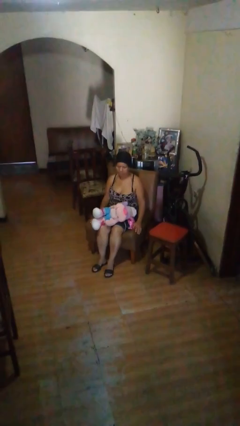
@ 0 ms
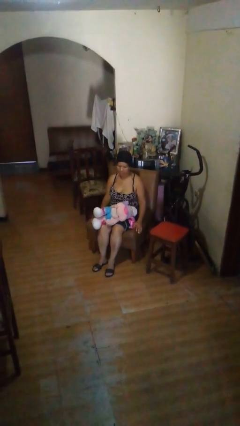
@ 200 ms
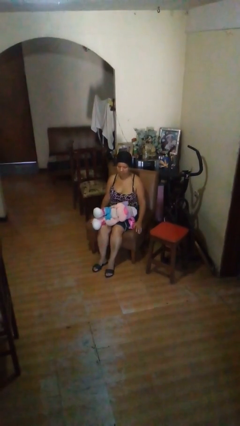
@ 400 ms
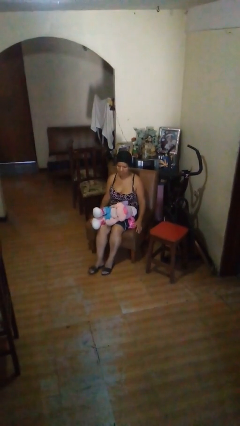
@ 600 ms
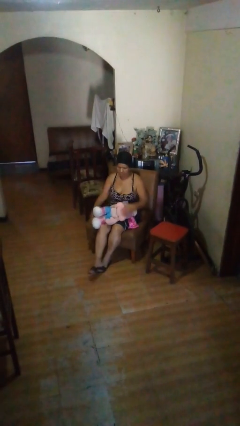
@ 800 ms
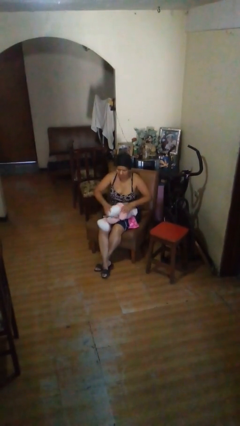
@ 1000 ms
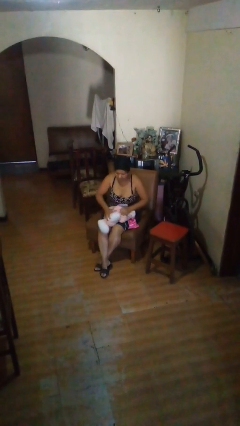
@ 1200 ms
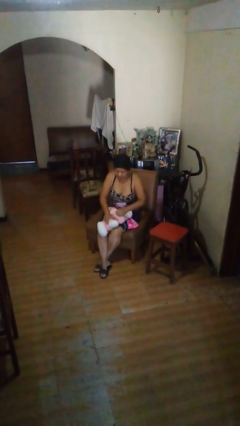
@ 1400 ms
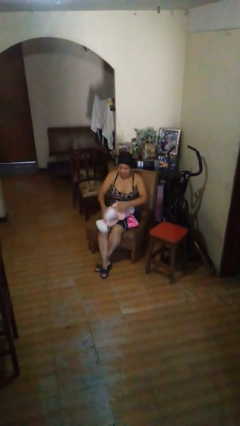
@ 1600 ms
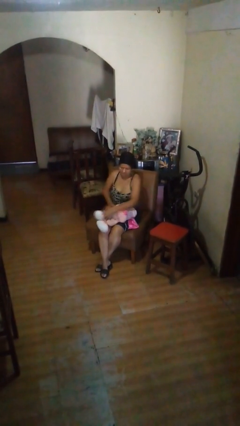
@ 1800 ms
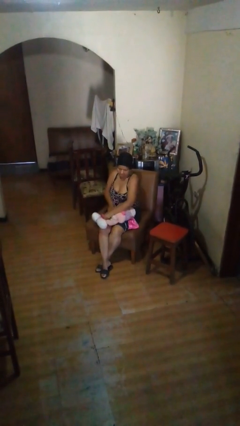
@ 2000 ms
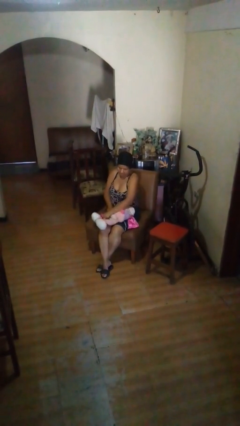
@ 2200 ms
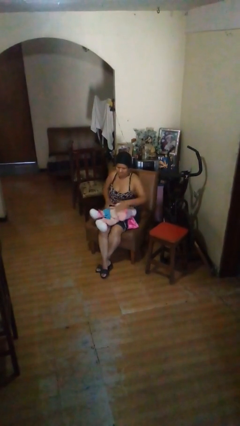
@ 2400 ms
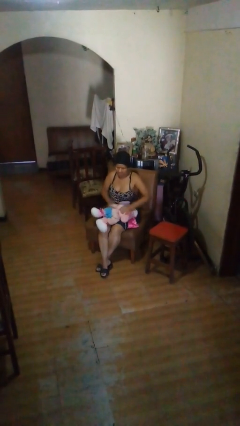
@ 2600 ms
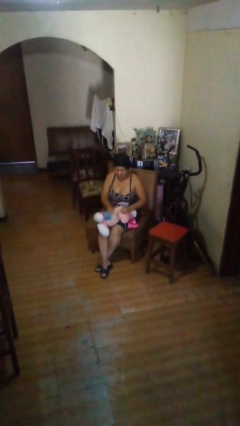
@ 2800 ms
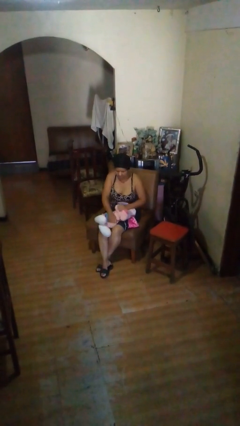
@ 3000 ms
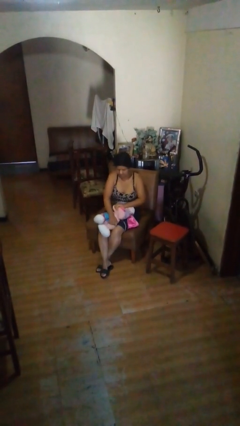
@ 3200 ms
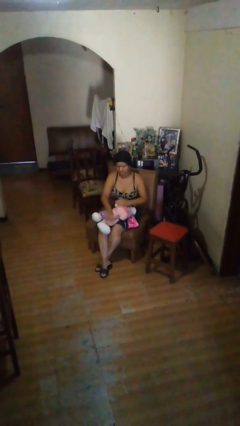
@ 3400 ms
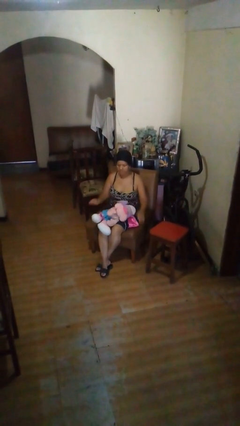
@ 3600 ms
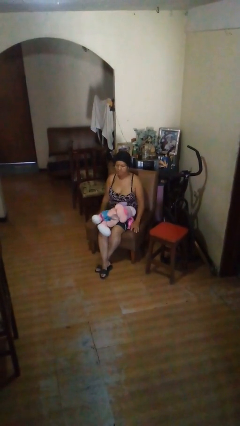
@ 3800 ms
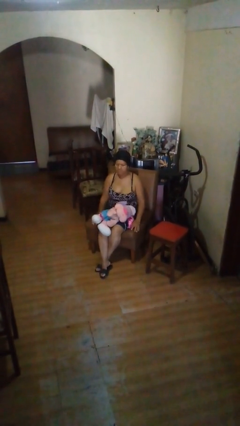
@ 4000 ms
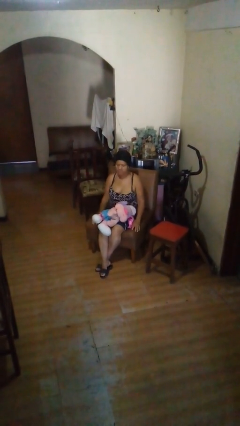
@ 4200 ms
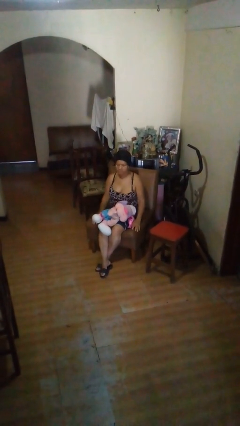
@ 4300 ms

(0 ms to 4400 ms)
person squeezes object

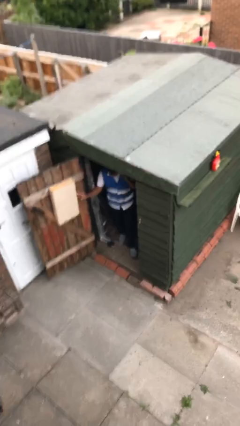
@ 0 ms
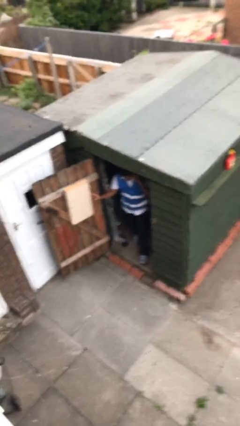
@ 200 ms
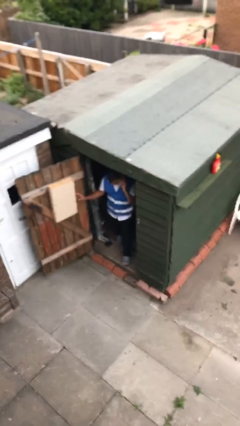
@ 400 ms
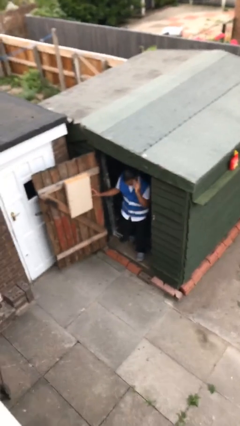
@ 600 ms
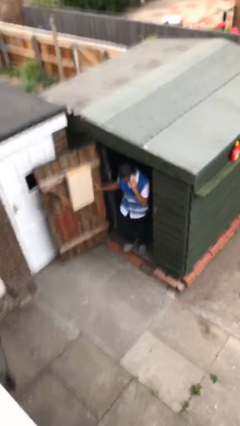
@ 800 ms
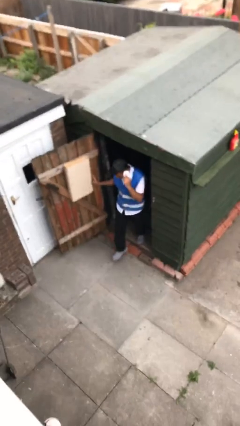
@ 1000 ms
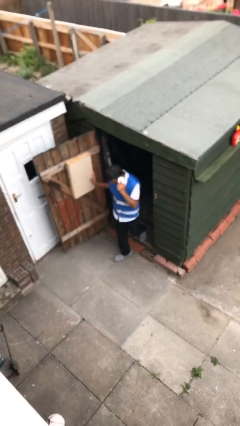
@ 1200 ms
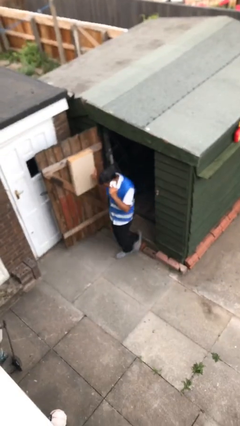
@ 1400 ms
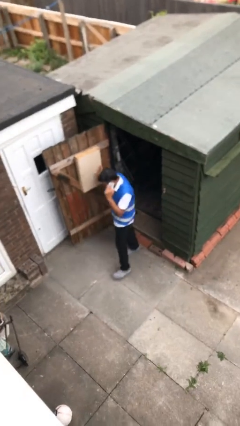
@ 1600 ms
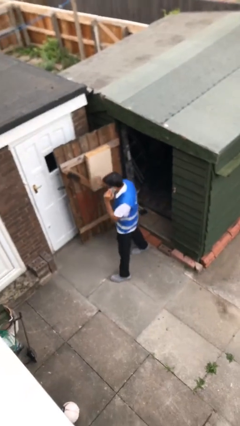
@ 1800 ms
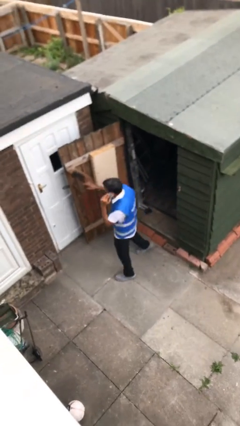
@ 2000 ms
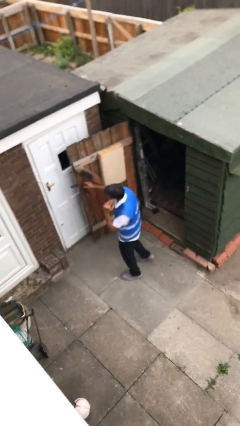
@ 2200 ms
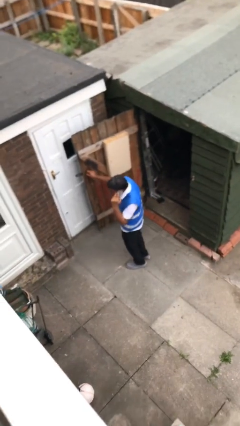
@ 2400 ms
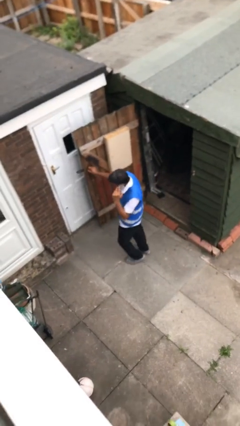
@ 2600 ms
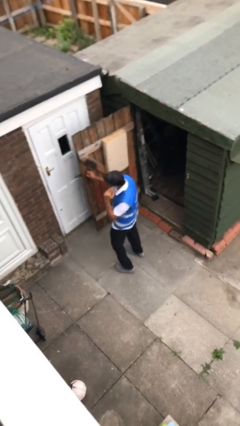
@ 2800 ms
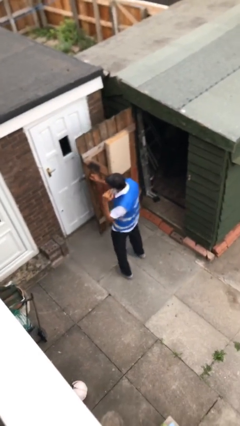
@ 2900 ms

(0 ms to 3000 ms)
person enters scene through structure

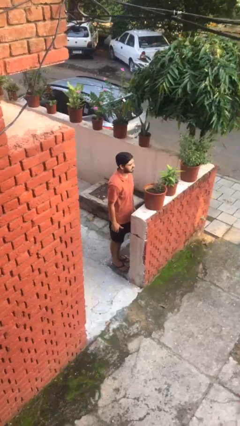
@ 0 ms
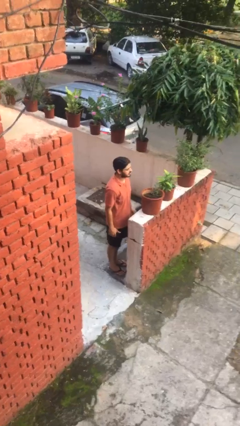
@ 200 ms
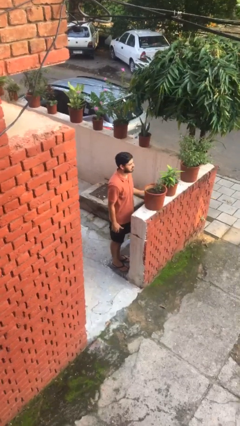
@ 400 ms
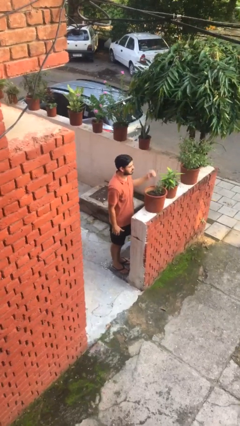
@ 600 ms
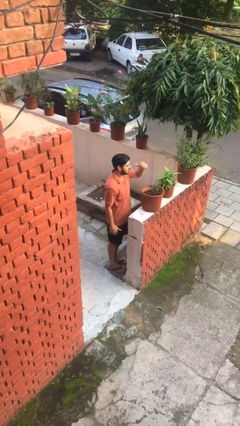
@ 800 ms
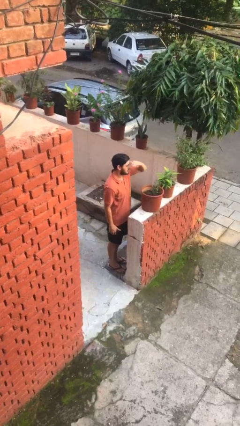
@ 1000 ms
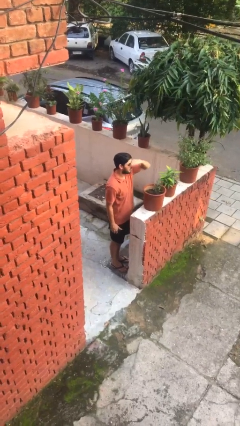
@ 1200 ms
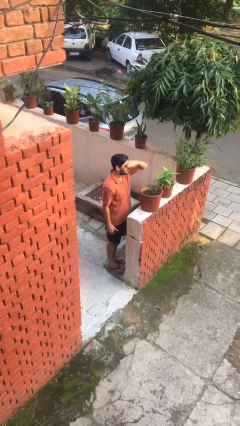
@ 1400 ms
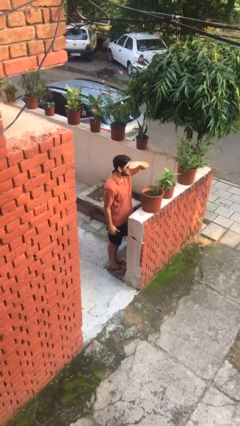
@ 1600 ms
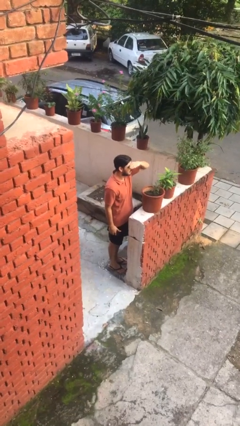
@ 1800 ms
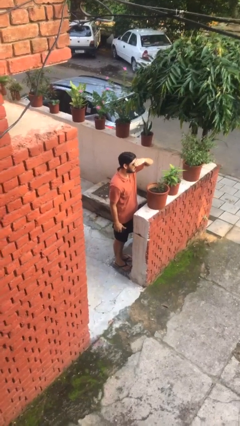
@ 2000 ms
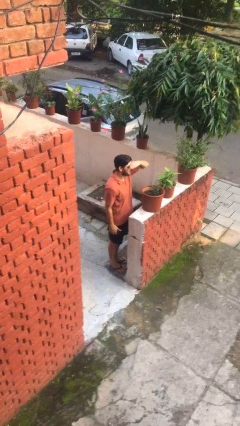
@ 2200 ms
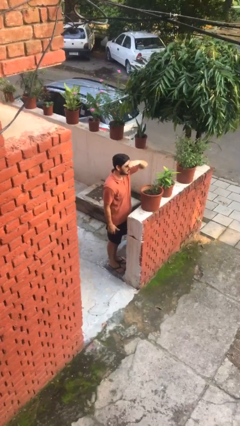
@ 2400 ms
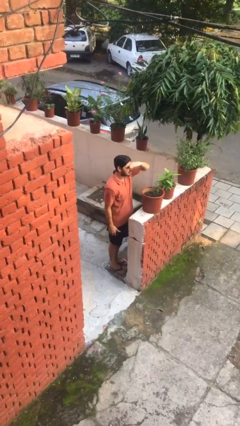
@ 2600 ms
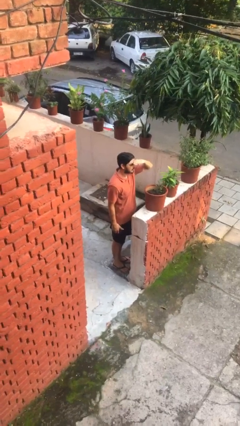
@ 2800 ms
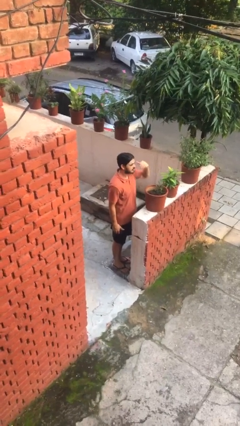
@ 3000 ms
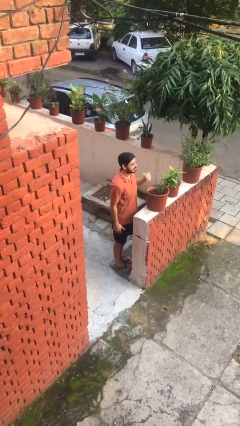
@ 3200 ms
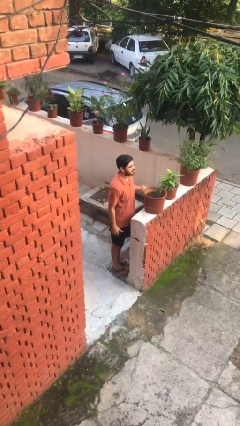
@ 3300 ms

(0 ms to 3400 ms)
person shades eyes

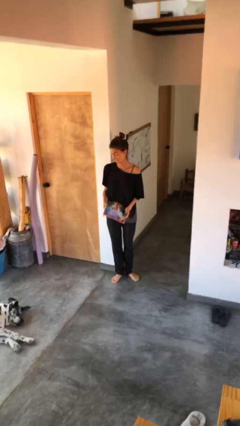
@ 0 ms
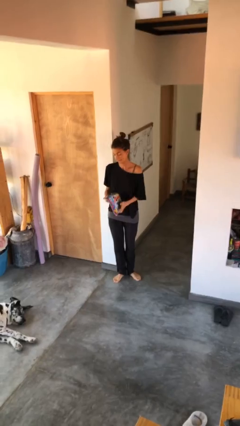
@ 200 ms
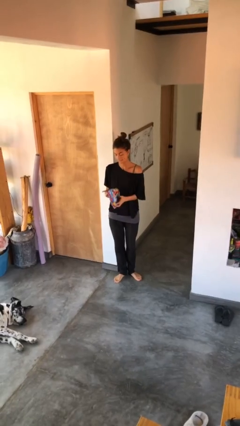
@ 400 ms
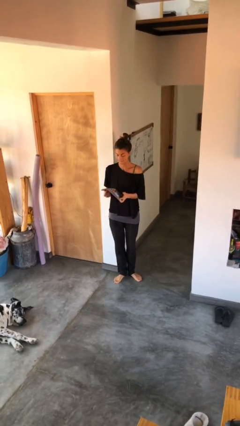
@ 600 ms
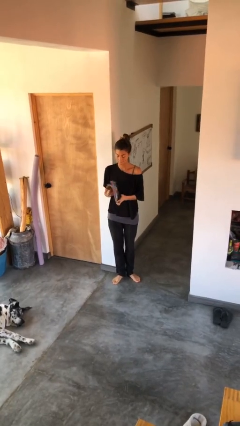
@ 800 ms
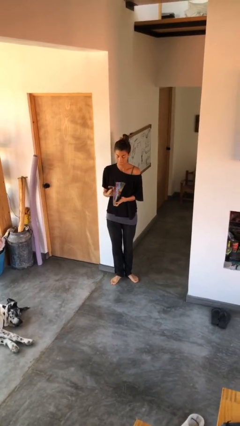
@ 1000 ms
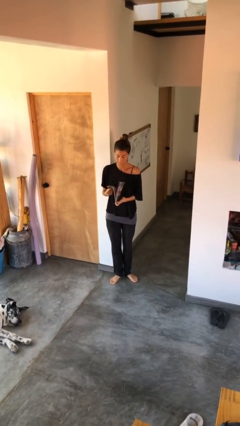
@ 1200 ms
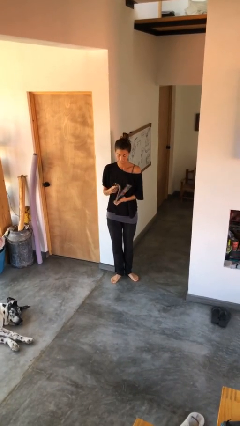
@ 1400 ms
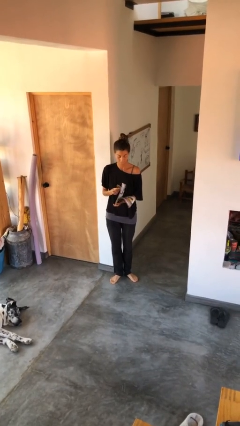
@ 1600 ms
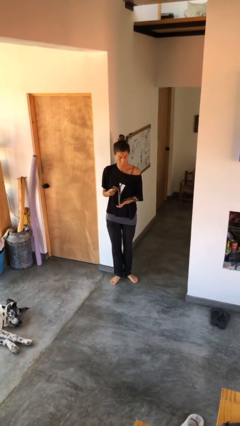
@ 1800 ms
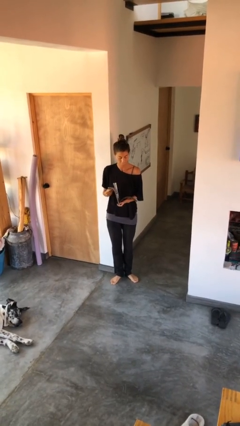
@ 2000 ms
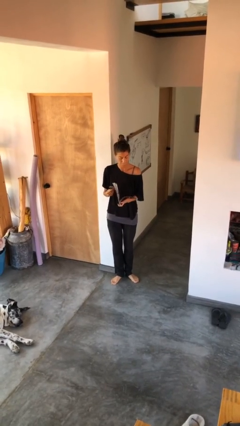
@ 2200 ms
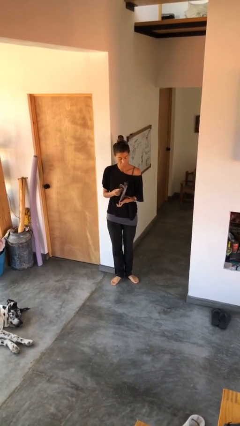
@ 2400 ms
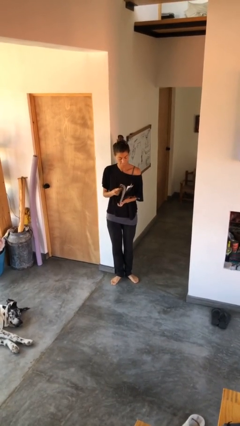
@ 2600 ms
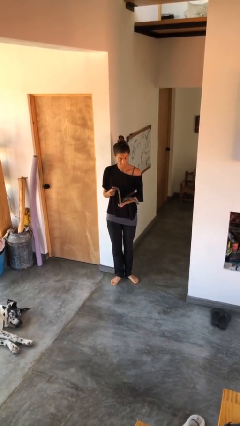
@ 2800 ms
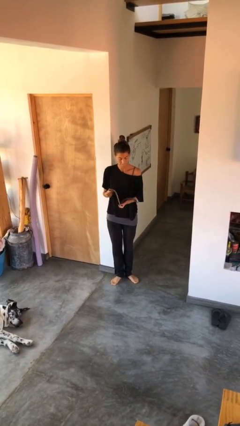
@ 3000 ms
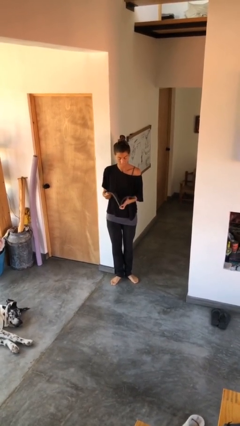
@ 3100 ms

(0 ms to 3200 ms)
person reads magazine

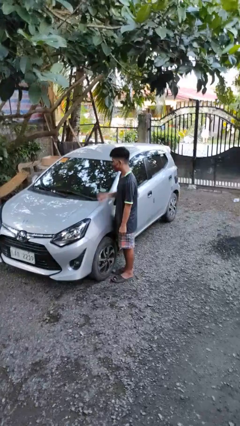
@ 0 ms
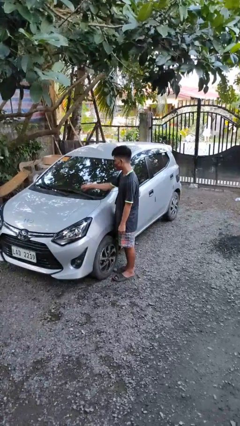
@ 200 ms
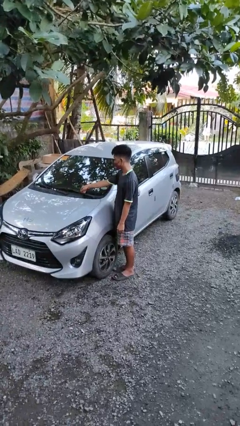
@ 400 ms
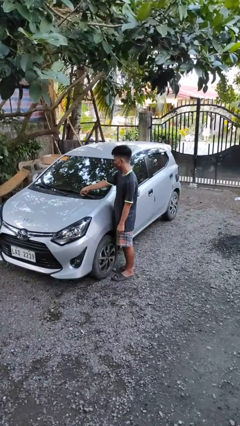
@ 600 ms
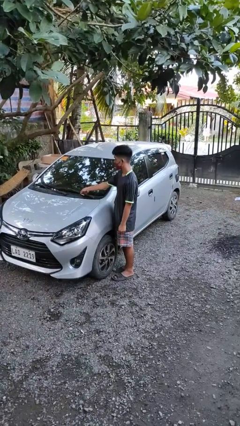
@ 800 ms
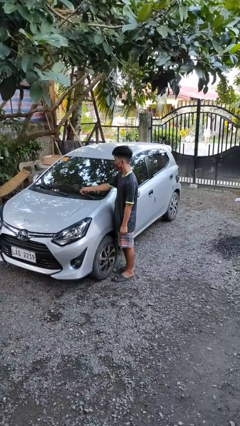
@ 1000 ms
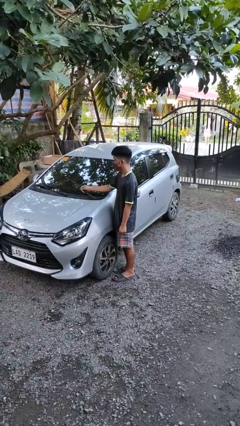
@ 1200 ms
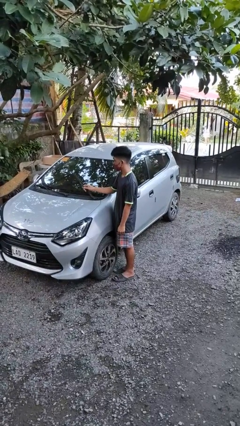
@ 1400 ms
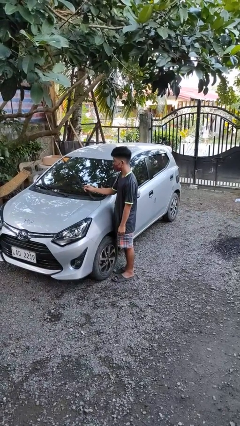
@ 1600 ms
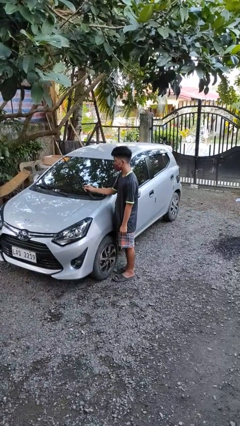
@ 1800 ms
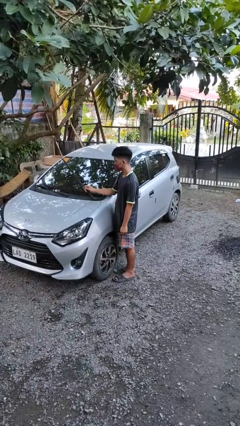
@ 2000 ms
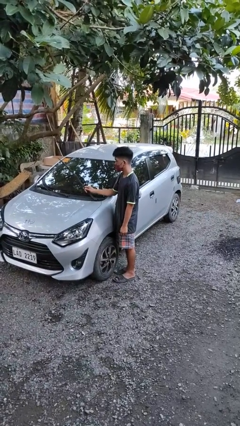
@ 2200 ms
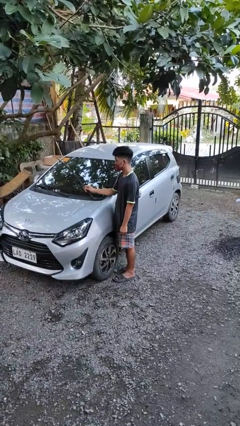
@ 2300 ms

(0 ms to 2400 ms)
person flips up car wipers

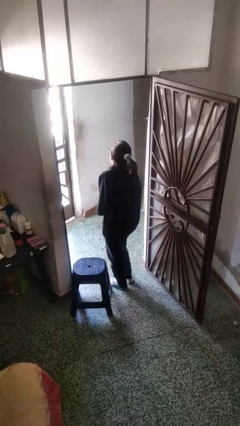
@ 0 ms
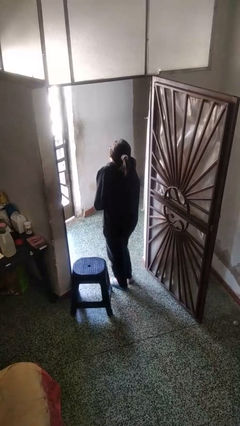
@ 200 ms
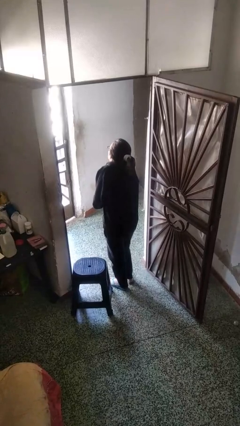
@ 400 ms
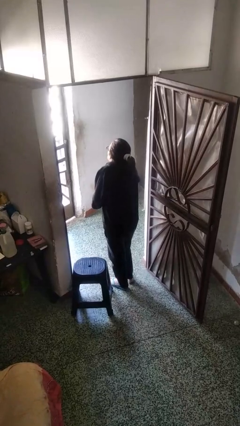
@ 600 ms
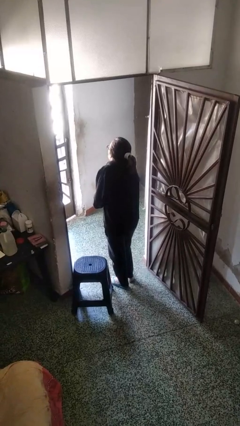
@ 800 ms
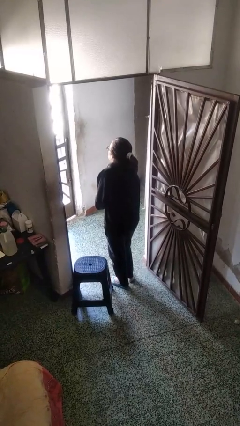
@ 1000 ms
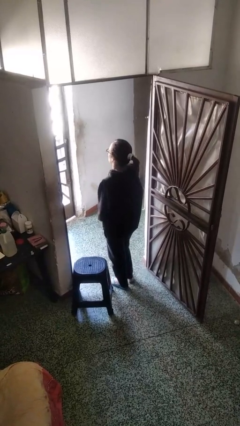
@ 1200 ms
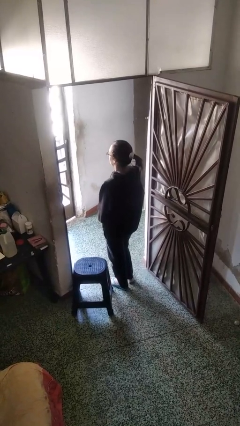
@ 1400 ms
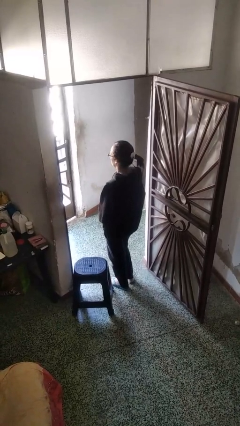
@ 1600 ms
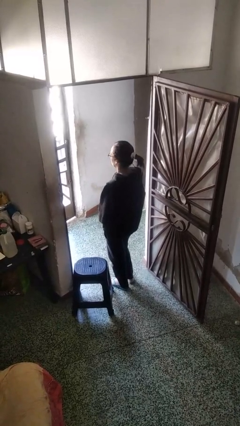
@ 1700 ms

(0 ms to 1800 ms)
person shrugs
